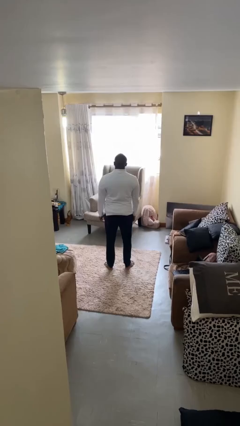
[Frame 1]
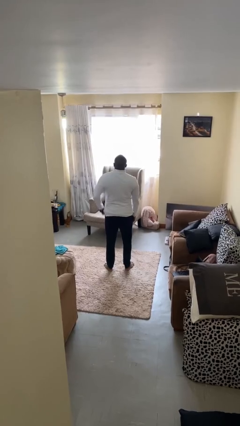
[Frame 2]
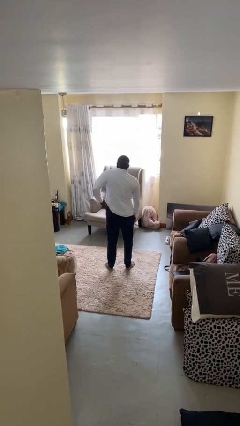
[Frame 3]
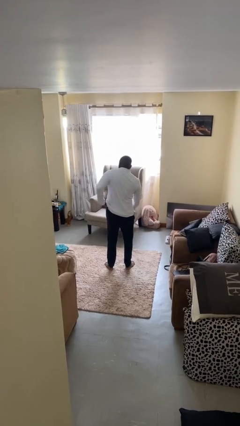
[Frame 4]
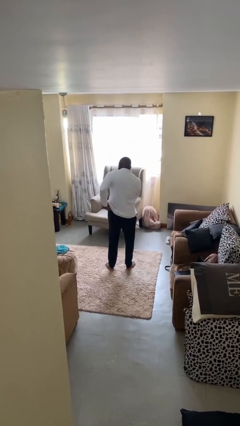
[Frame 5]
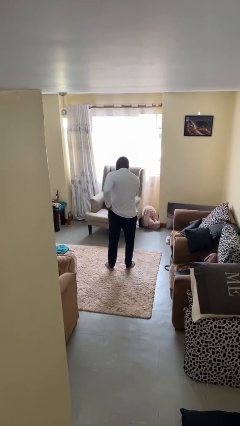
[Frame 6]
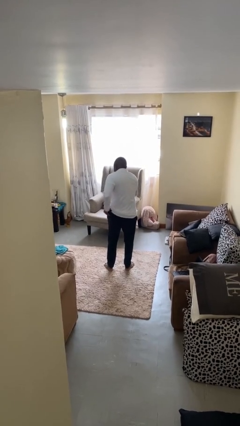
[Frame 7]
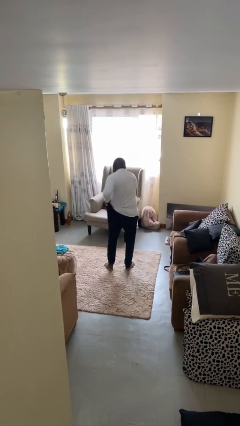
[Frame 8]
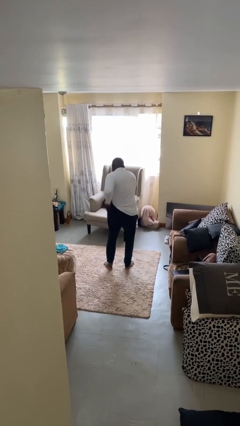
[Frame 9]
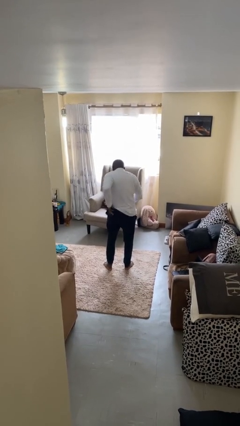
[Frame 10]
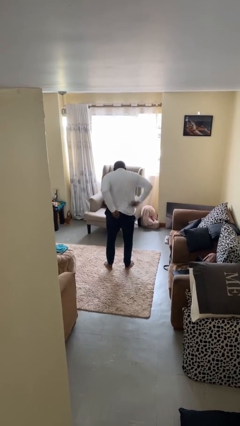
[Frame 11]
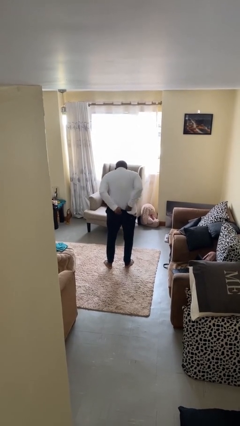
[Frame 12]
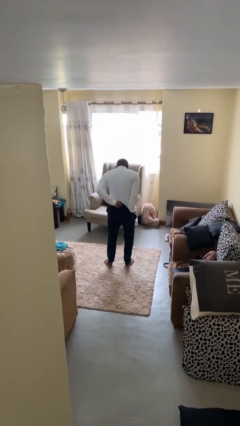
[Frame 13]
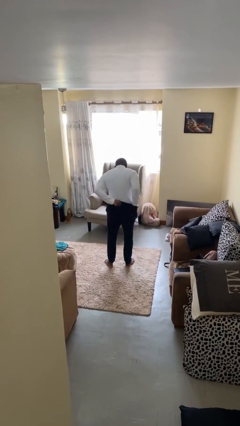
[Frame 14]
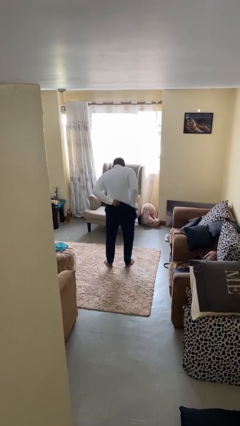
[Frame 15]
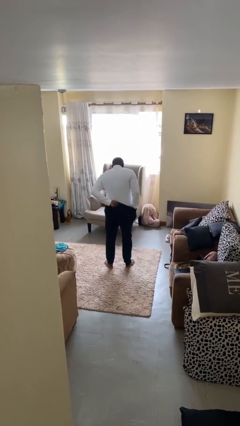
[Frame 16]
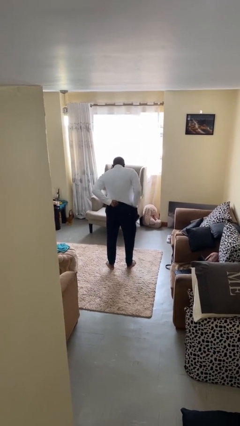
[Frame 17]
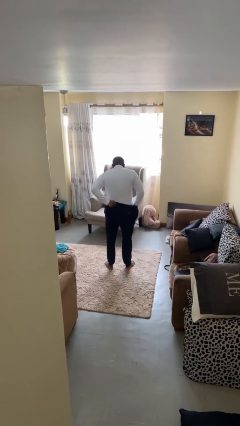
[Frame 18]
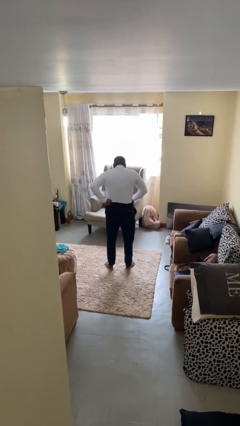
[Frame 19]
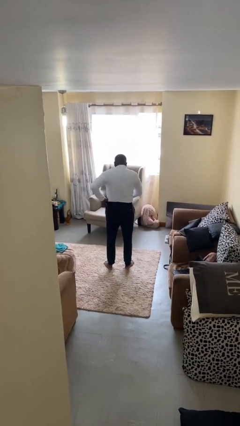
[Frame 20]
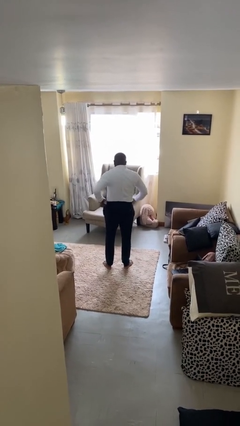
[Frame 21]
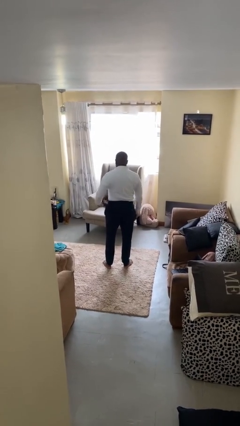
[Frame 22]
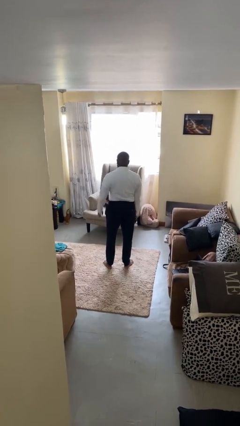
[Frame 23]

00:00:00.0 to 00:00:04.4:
person tucks in shirt

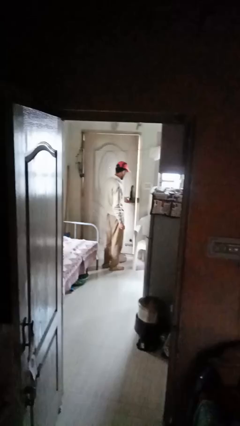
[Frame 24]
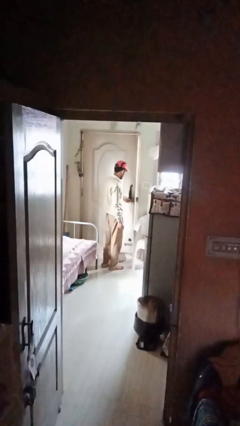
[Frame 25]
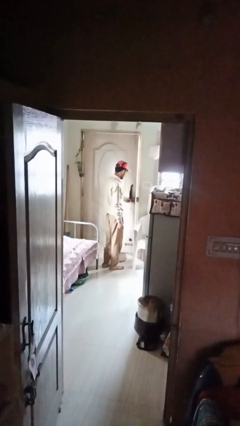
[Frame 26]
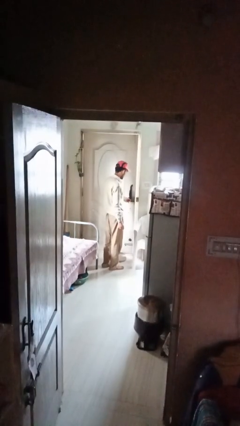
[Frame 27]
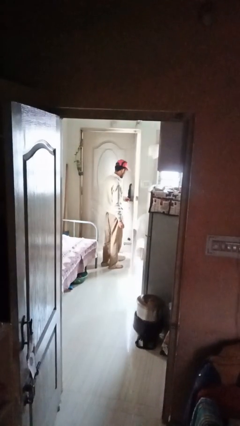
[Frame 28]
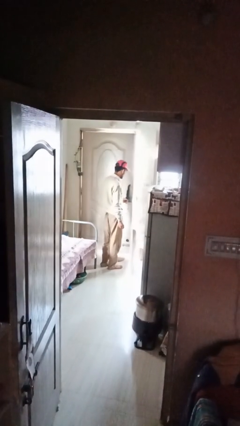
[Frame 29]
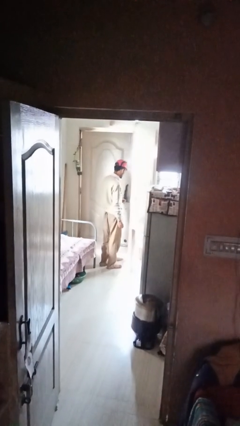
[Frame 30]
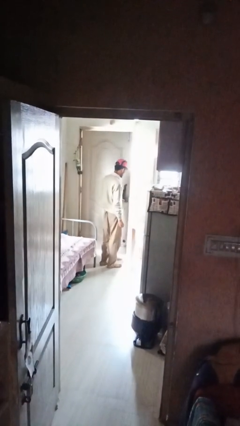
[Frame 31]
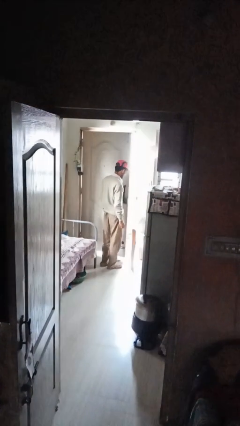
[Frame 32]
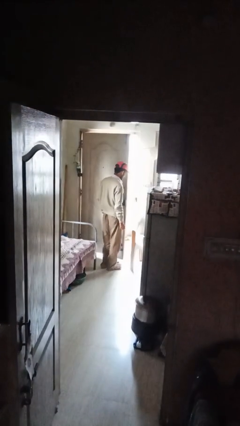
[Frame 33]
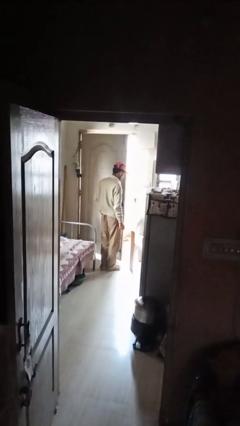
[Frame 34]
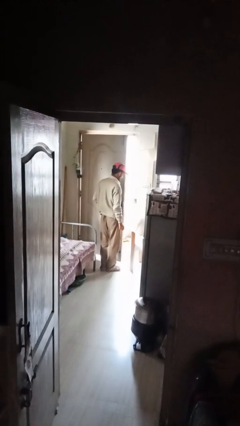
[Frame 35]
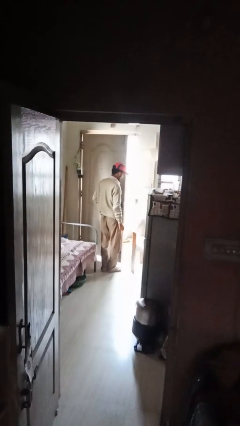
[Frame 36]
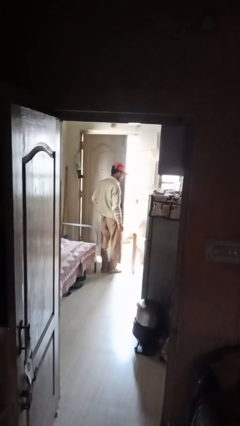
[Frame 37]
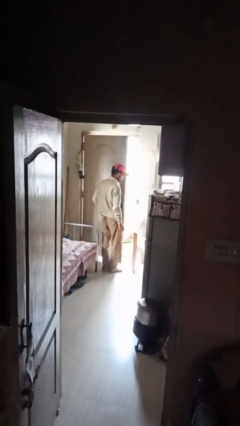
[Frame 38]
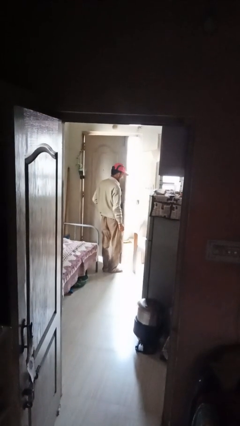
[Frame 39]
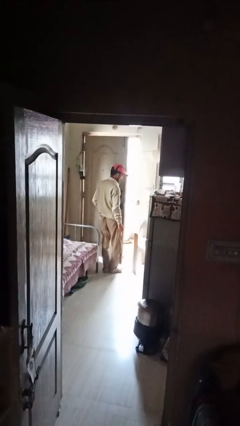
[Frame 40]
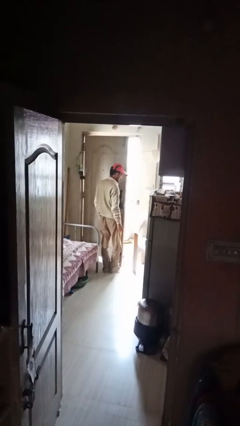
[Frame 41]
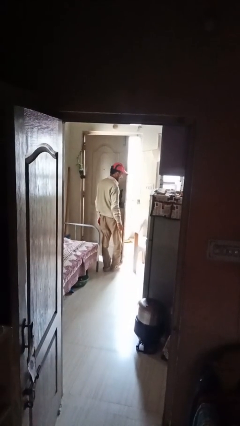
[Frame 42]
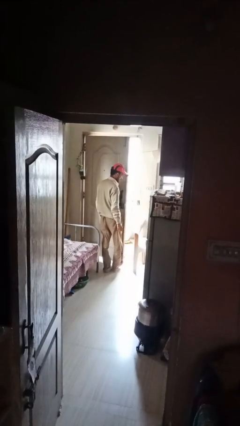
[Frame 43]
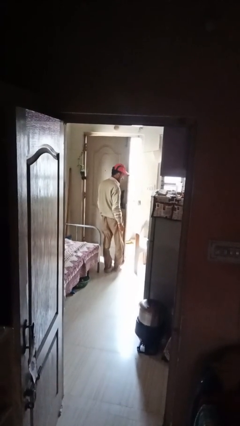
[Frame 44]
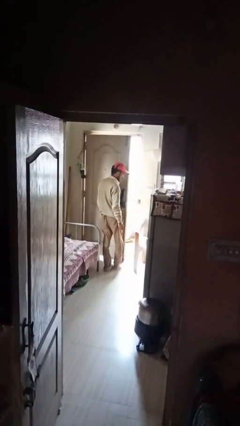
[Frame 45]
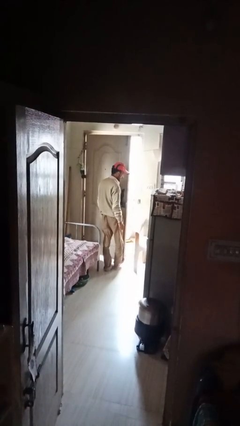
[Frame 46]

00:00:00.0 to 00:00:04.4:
person opens facility door

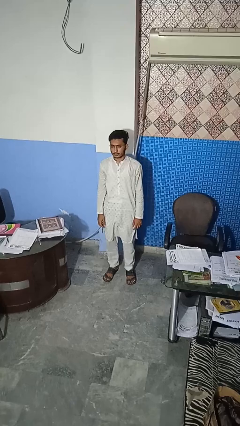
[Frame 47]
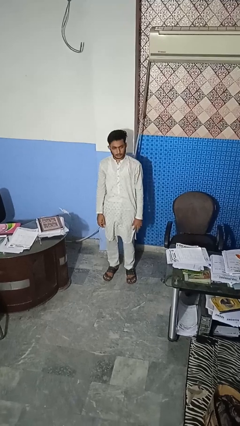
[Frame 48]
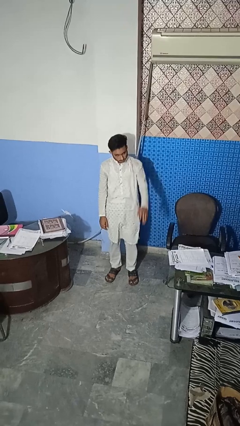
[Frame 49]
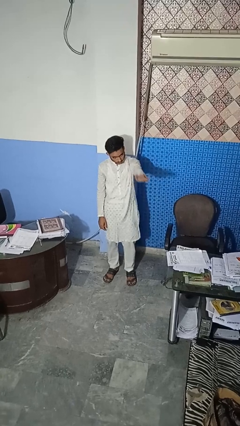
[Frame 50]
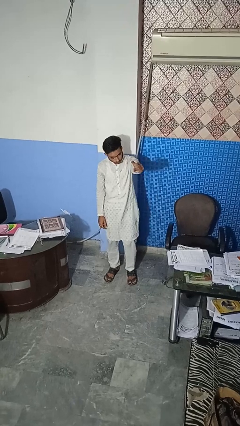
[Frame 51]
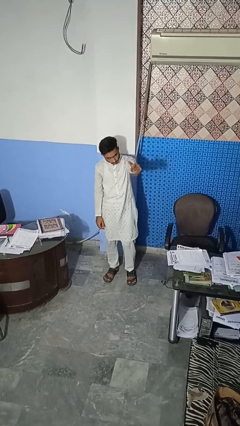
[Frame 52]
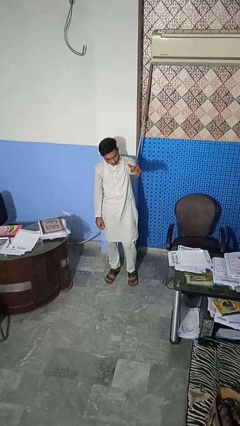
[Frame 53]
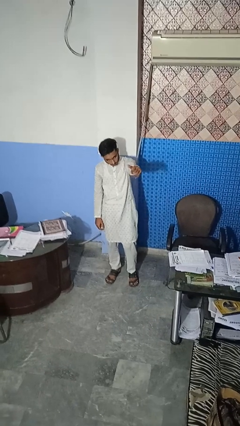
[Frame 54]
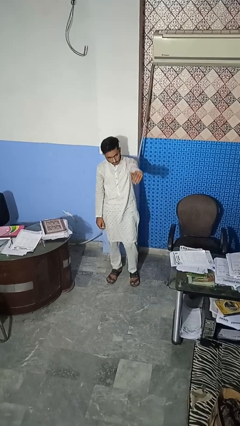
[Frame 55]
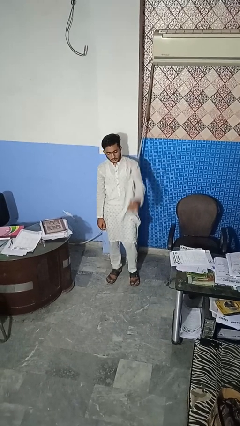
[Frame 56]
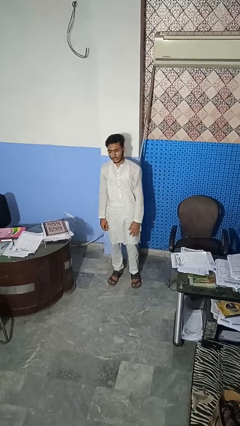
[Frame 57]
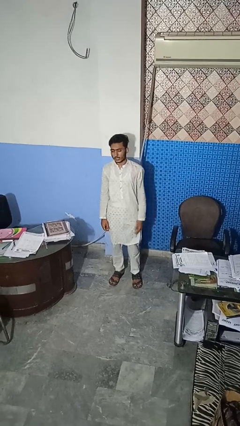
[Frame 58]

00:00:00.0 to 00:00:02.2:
person gestures come here

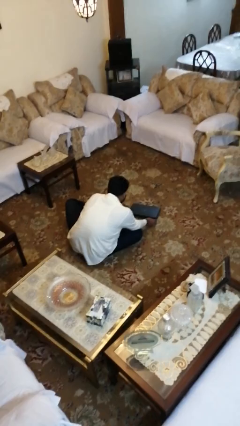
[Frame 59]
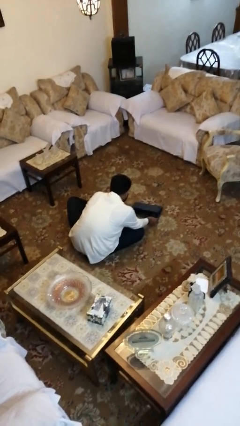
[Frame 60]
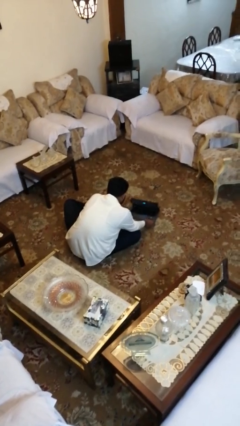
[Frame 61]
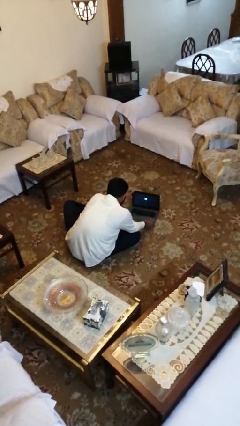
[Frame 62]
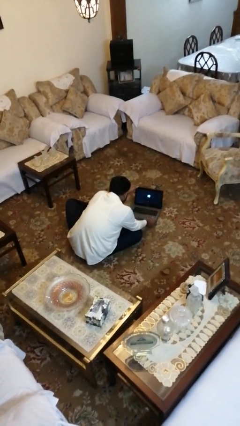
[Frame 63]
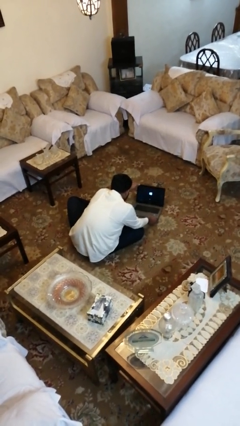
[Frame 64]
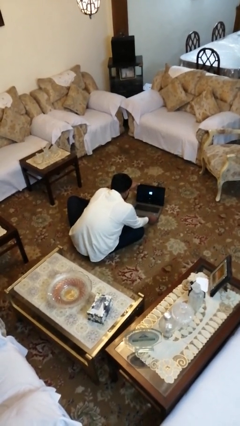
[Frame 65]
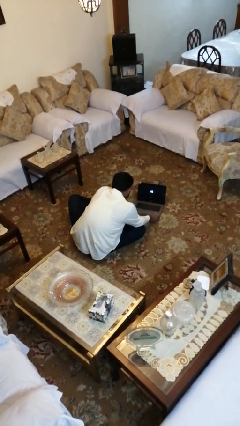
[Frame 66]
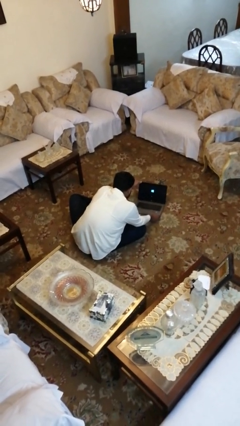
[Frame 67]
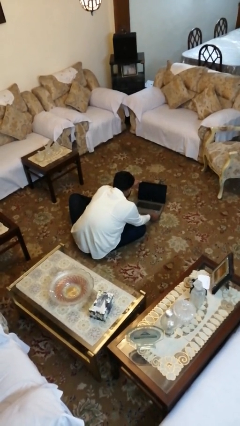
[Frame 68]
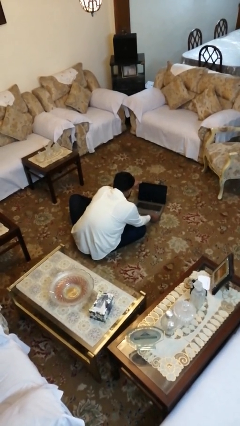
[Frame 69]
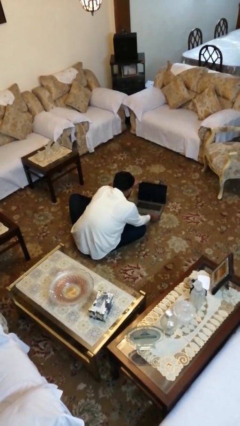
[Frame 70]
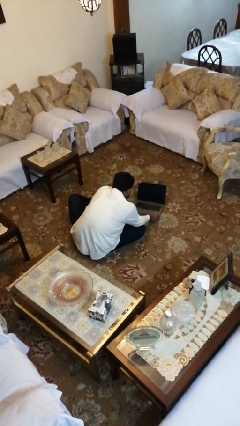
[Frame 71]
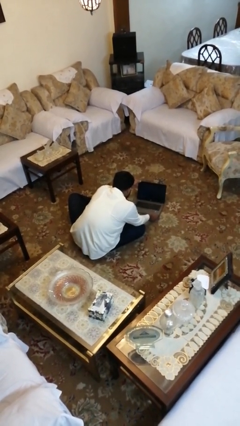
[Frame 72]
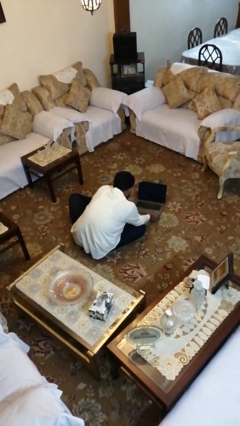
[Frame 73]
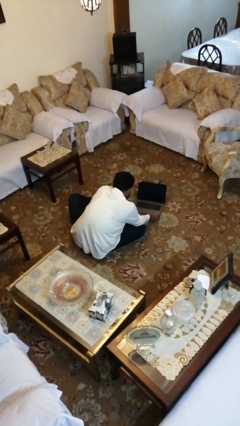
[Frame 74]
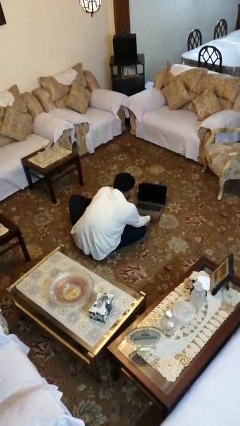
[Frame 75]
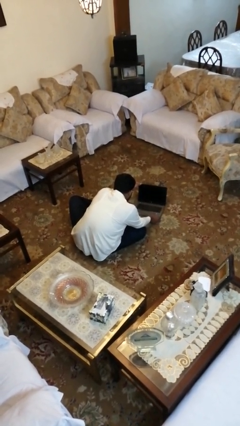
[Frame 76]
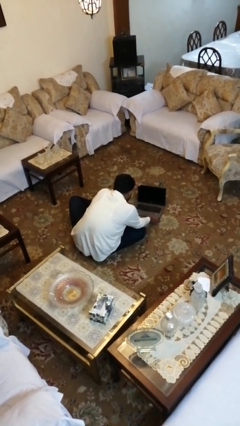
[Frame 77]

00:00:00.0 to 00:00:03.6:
person opens laptop

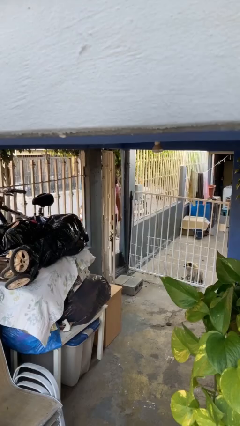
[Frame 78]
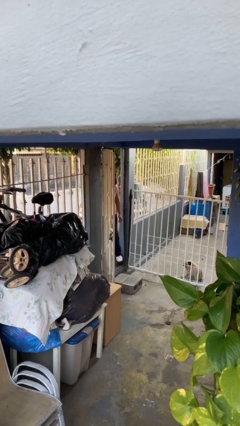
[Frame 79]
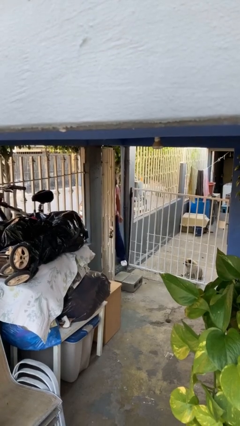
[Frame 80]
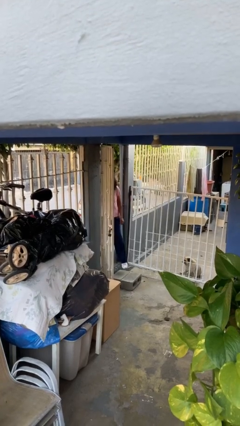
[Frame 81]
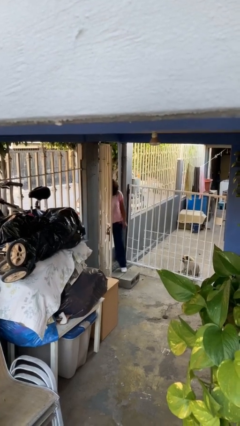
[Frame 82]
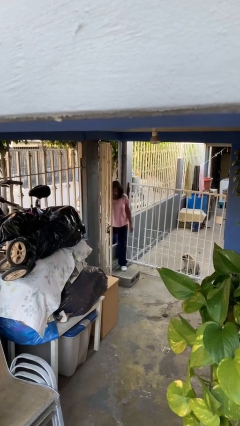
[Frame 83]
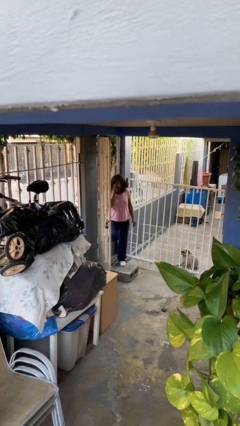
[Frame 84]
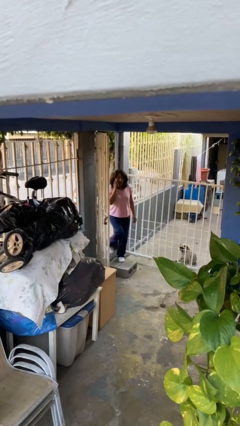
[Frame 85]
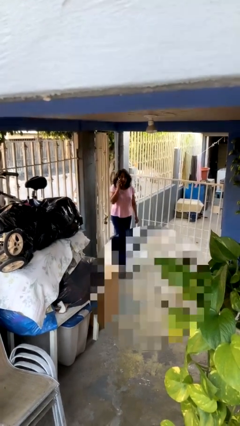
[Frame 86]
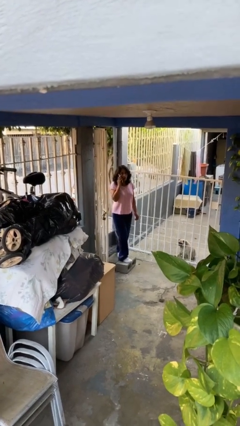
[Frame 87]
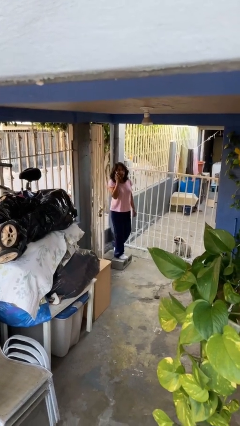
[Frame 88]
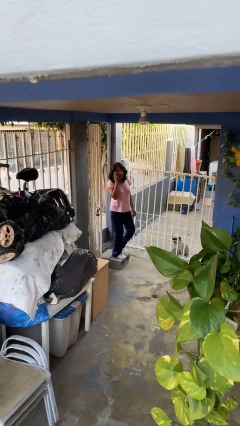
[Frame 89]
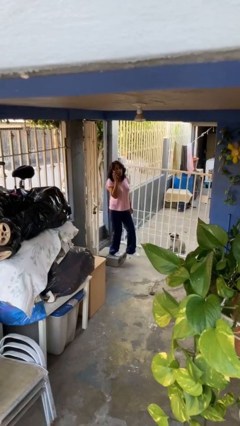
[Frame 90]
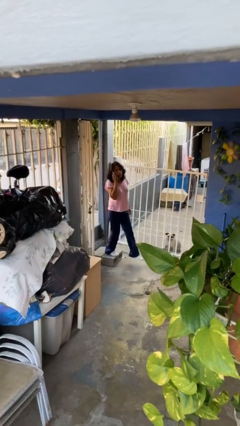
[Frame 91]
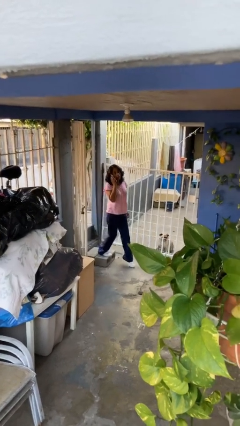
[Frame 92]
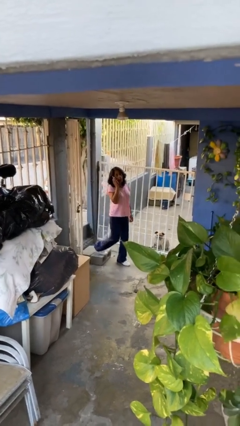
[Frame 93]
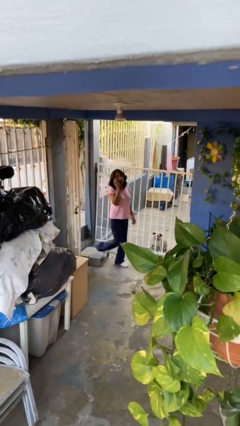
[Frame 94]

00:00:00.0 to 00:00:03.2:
person enters scene through structure
